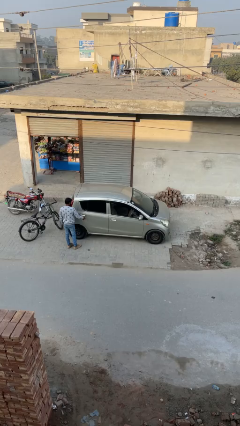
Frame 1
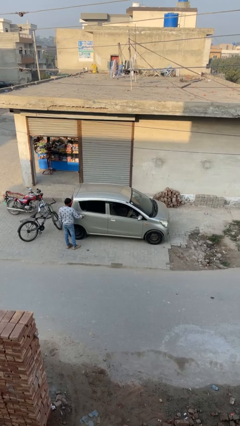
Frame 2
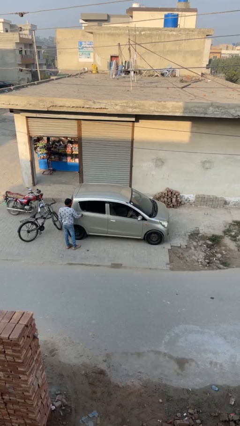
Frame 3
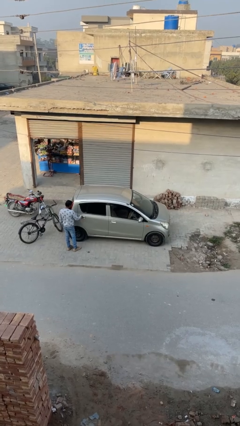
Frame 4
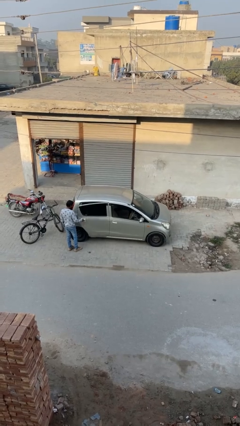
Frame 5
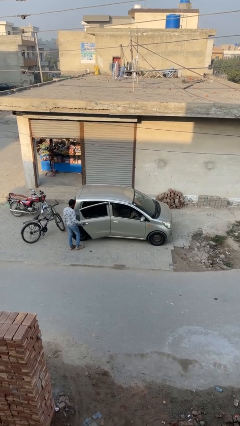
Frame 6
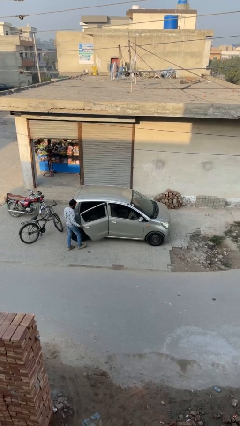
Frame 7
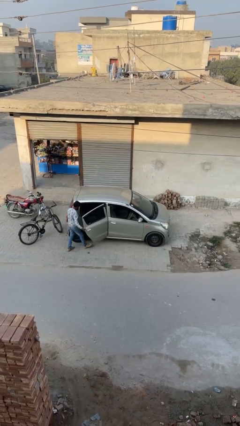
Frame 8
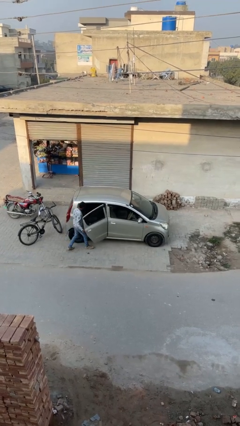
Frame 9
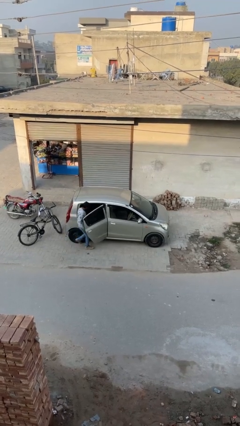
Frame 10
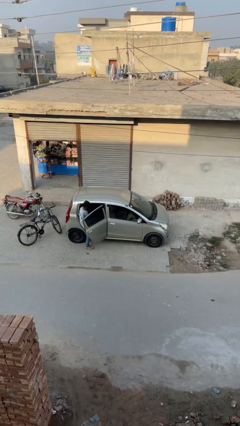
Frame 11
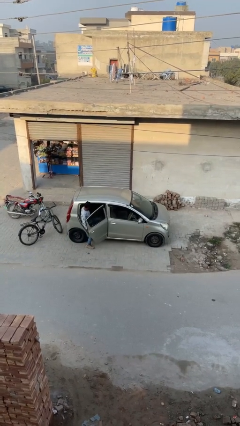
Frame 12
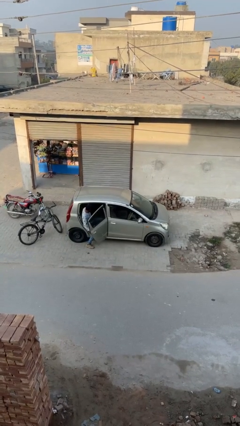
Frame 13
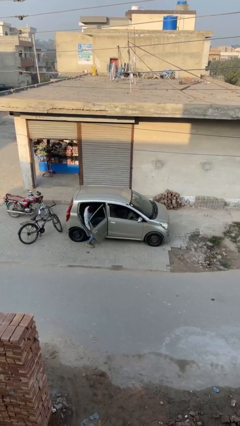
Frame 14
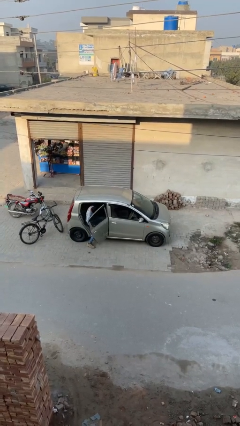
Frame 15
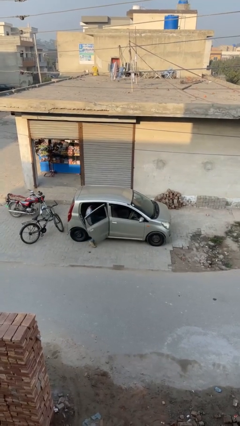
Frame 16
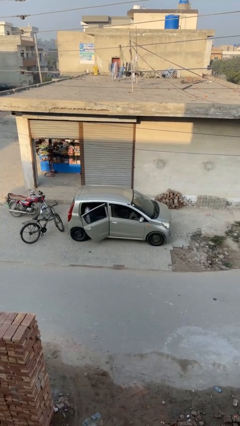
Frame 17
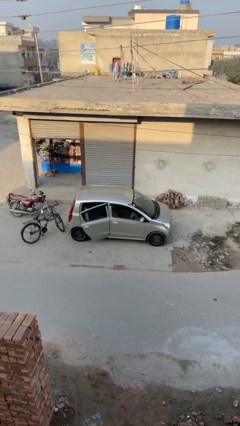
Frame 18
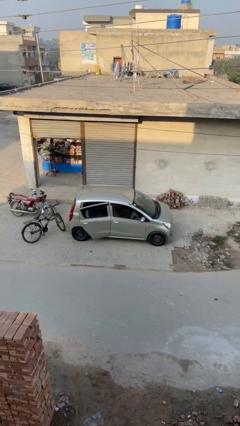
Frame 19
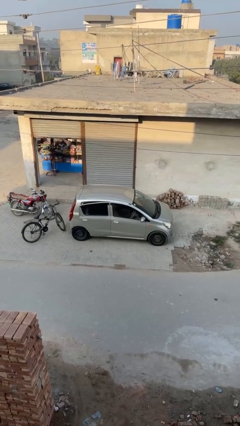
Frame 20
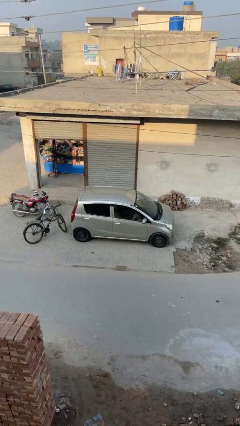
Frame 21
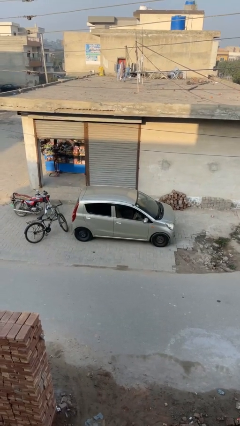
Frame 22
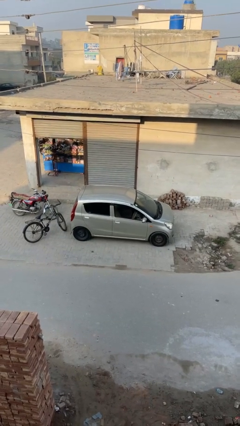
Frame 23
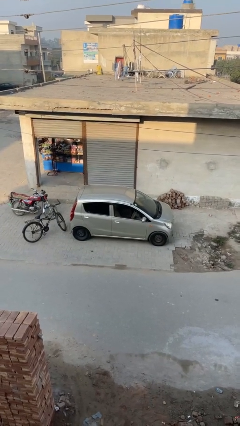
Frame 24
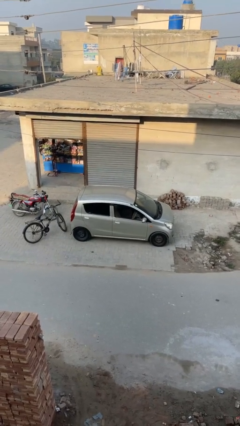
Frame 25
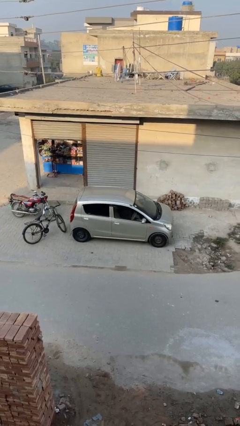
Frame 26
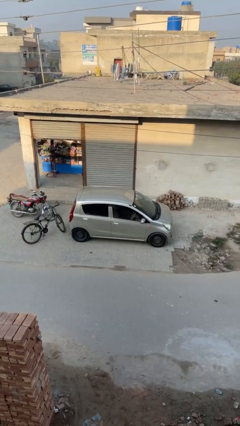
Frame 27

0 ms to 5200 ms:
car picks up person

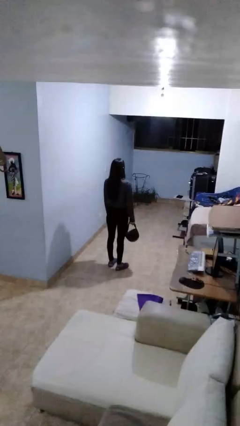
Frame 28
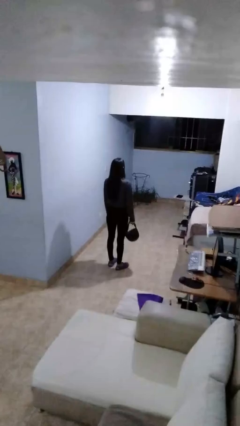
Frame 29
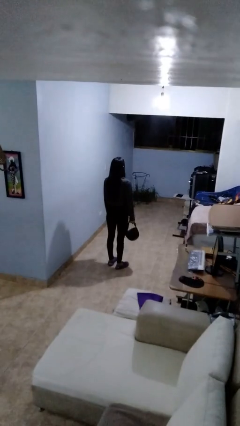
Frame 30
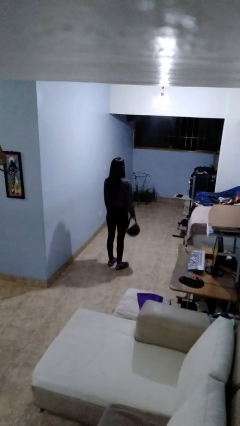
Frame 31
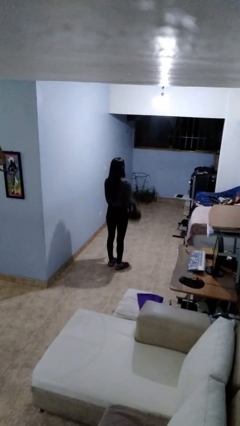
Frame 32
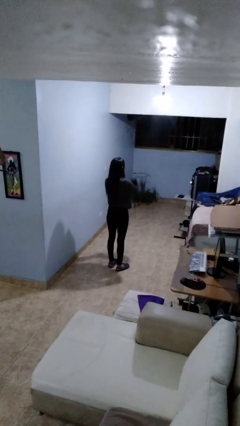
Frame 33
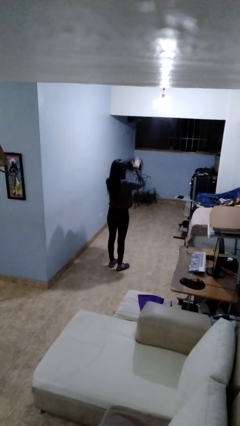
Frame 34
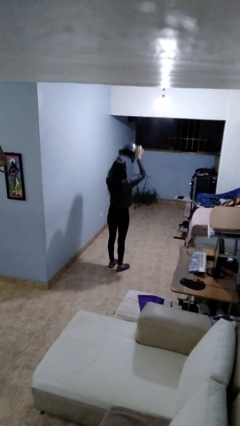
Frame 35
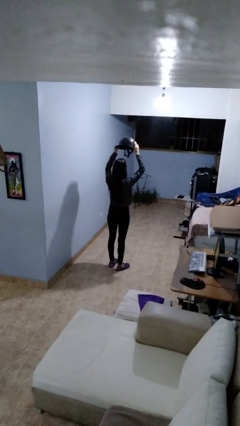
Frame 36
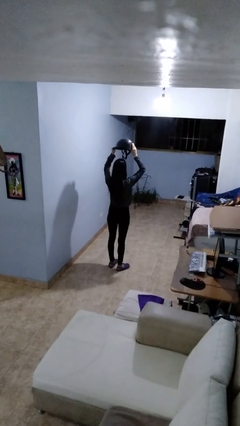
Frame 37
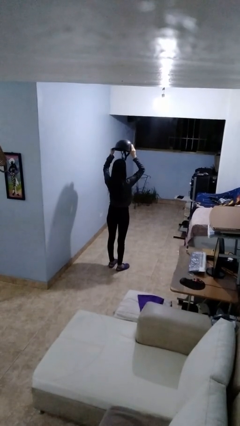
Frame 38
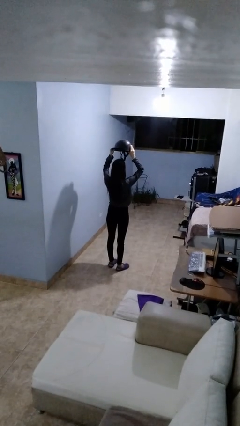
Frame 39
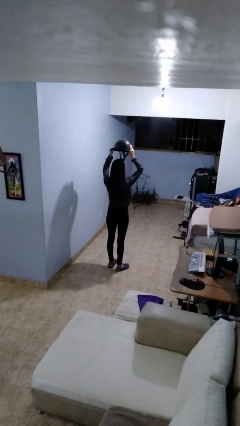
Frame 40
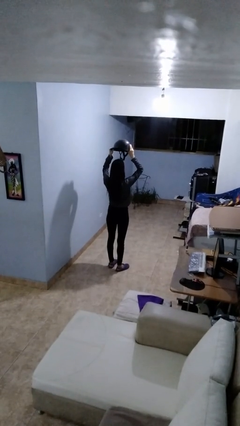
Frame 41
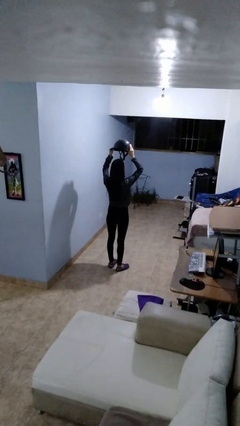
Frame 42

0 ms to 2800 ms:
person holds object above head

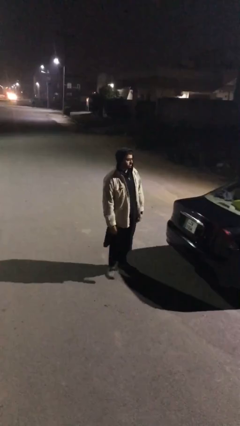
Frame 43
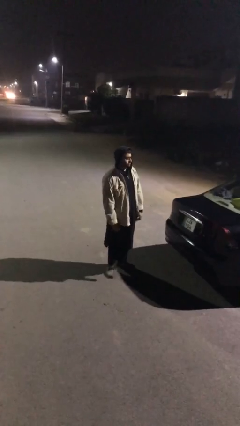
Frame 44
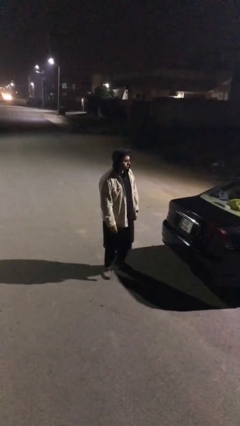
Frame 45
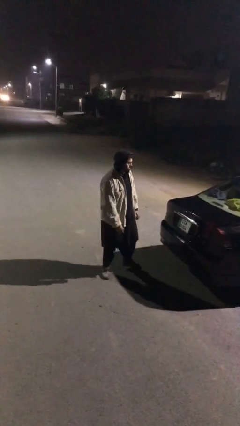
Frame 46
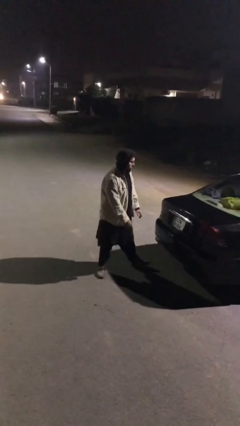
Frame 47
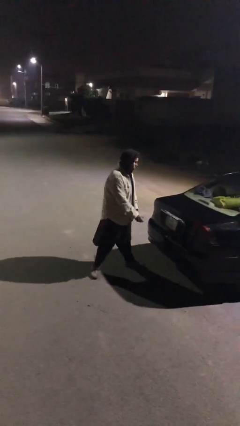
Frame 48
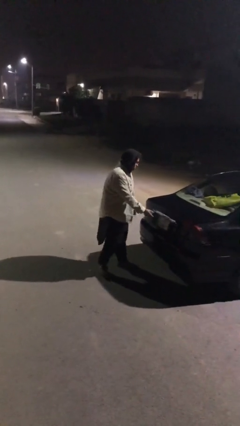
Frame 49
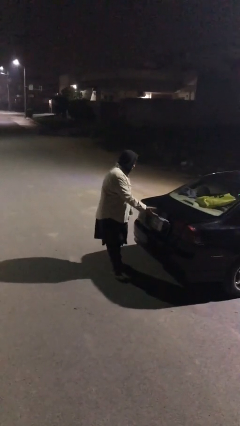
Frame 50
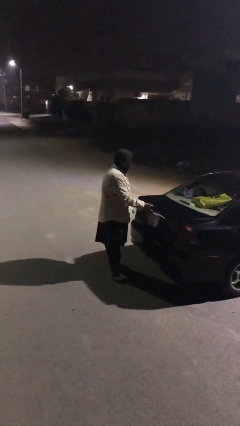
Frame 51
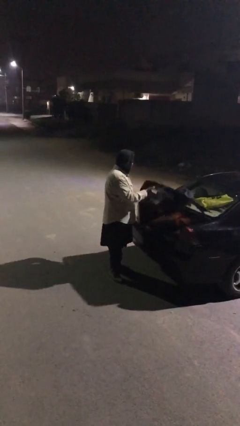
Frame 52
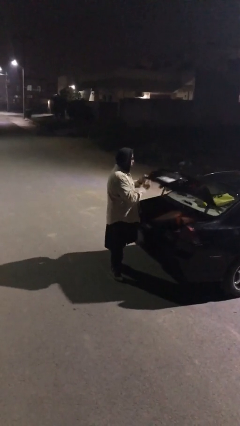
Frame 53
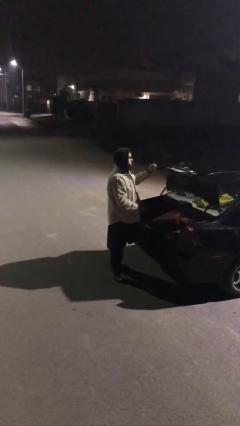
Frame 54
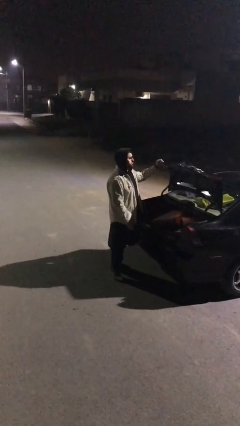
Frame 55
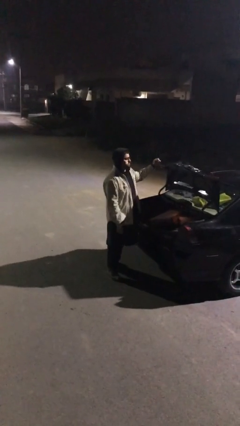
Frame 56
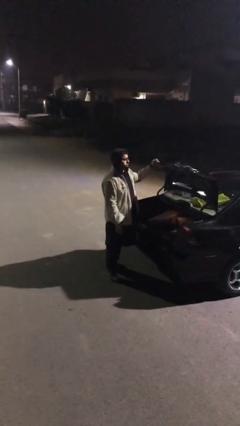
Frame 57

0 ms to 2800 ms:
person opens car trunk

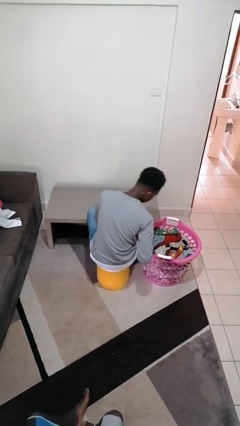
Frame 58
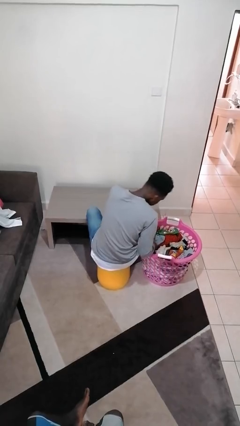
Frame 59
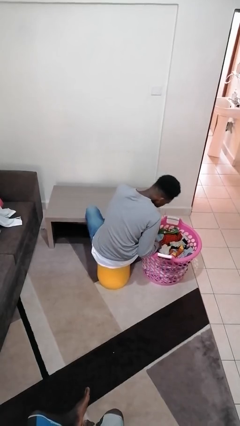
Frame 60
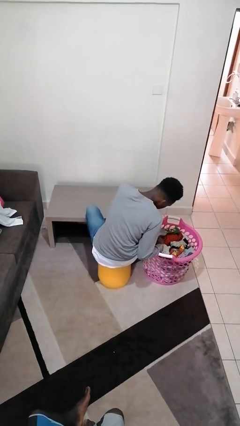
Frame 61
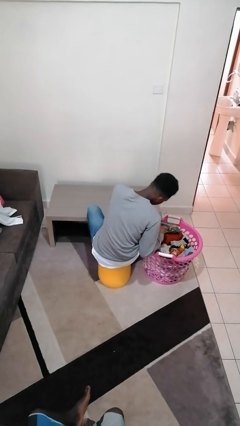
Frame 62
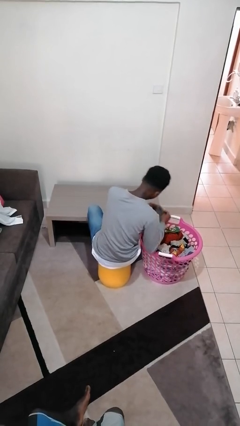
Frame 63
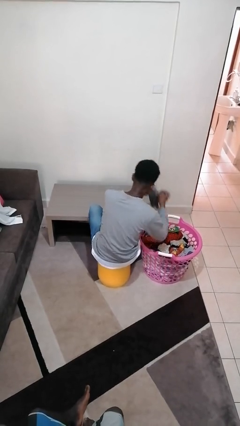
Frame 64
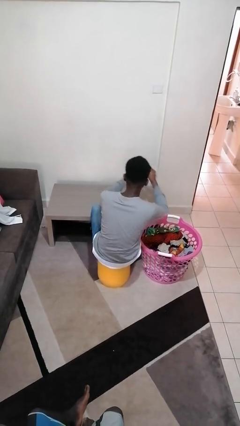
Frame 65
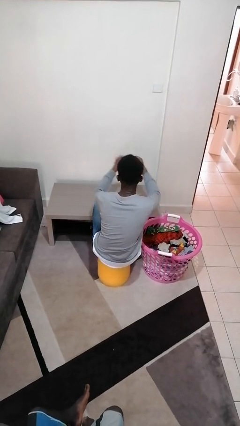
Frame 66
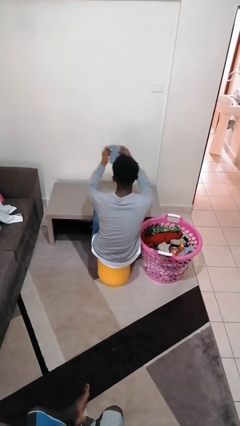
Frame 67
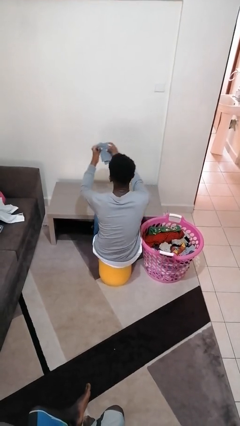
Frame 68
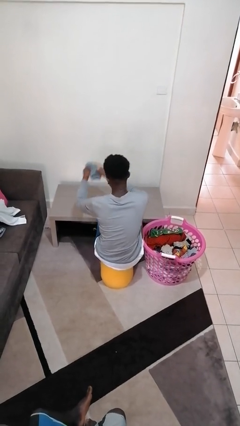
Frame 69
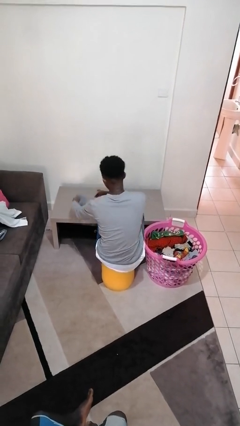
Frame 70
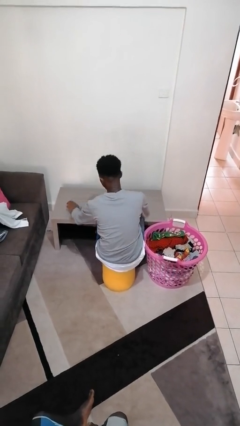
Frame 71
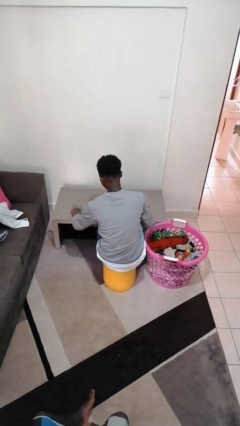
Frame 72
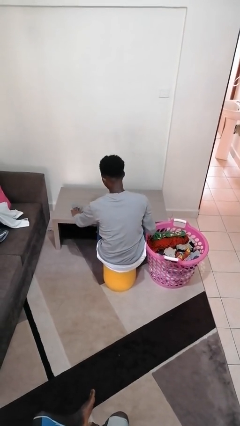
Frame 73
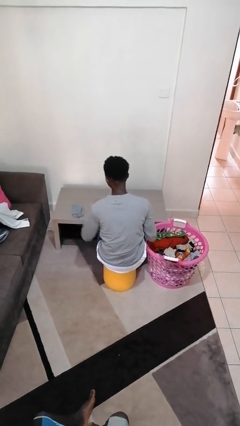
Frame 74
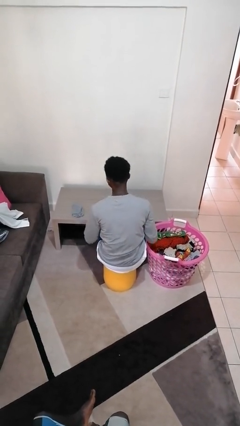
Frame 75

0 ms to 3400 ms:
person folds socks

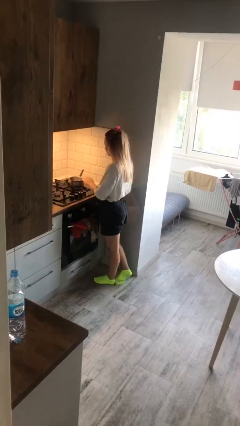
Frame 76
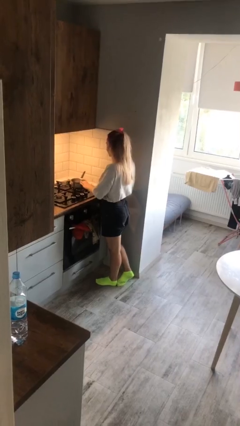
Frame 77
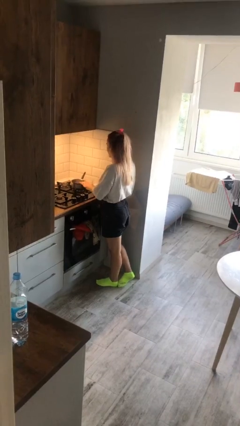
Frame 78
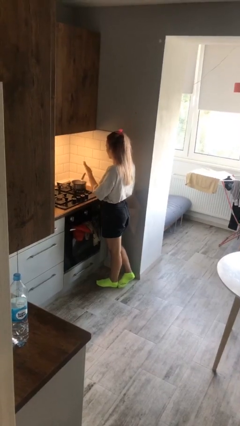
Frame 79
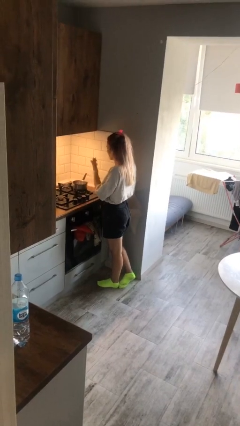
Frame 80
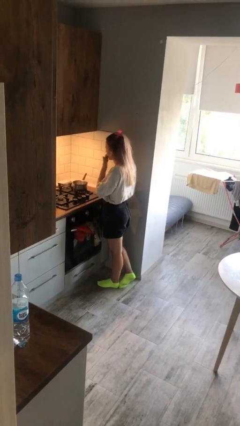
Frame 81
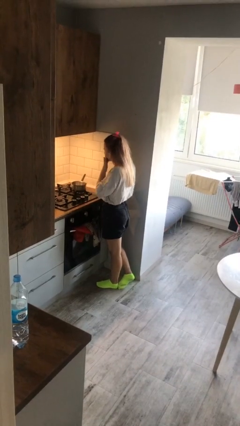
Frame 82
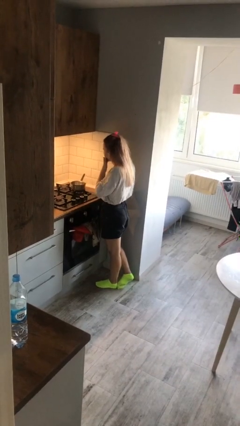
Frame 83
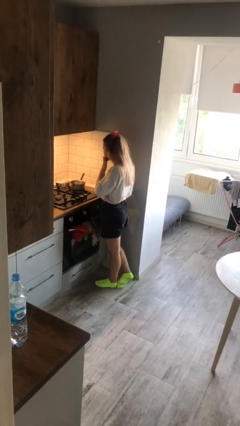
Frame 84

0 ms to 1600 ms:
person burns hand

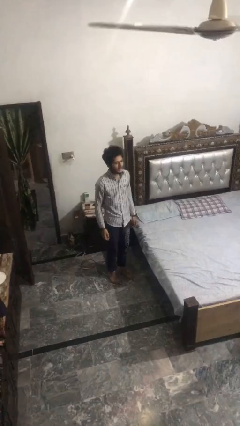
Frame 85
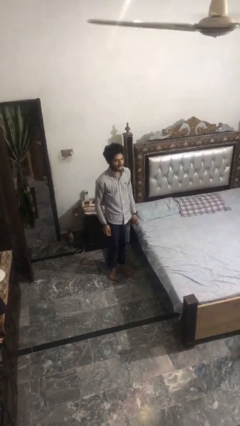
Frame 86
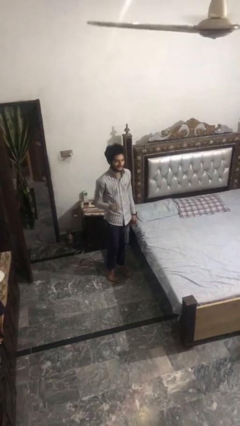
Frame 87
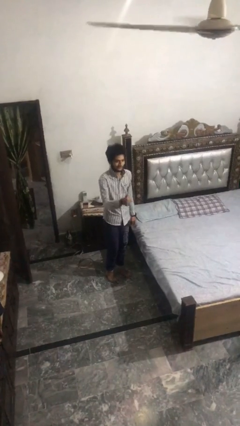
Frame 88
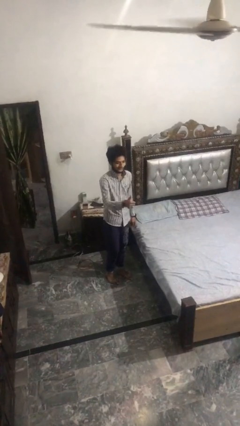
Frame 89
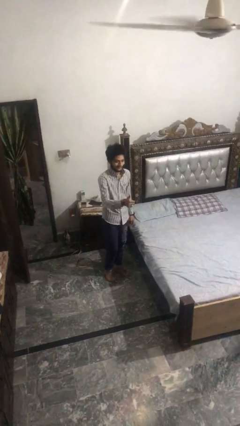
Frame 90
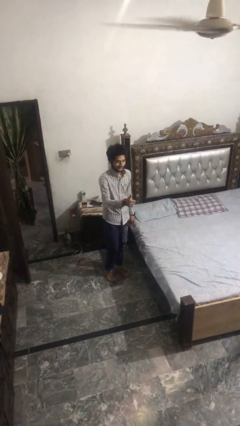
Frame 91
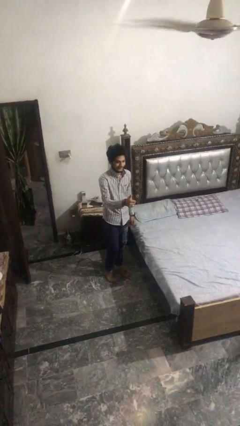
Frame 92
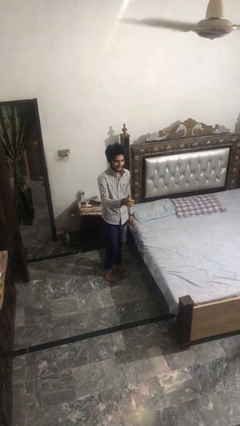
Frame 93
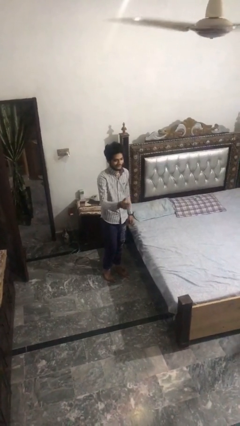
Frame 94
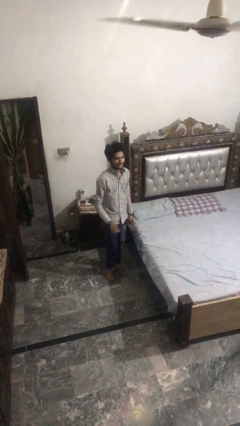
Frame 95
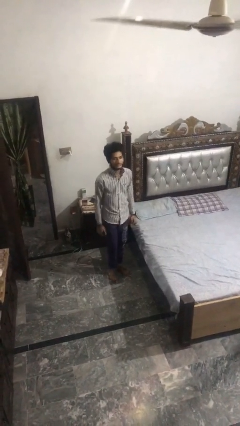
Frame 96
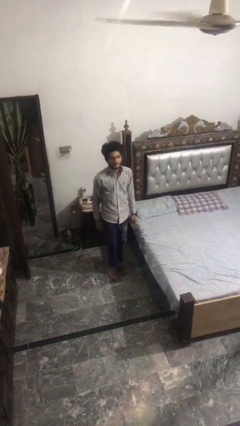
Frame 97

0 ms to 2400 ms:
person gestures thumbs up
